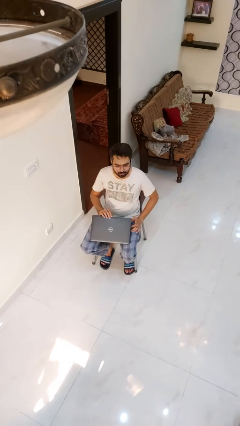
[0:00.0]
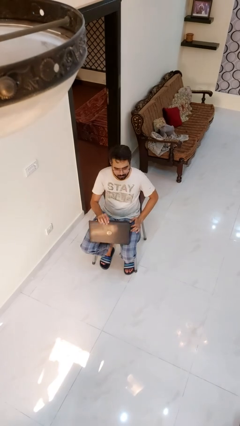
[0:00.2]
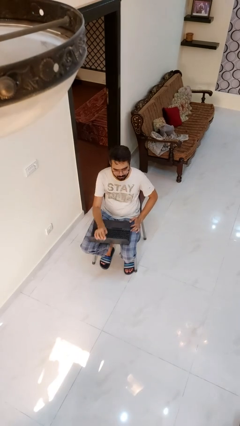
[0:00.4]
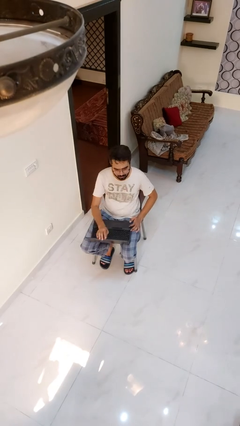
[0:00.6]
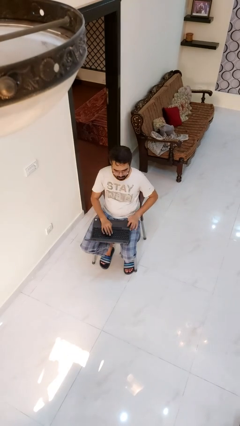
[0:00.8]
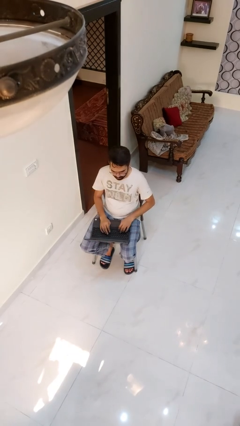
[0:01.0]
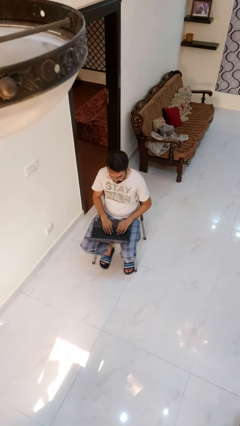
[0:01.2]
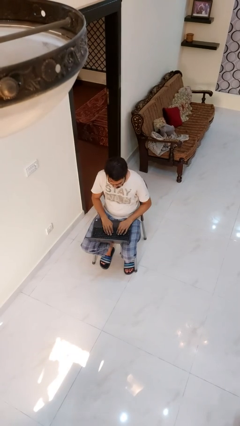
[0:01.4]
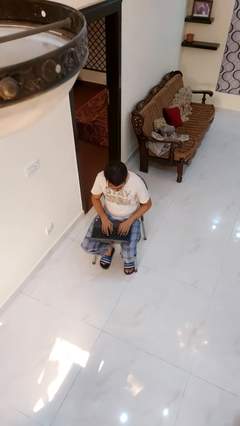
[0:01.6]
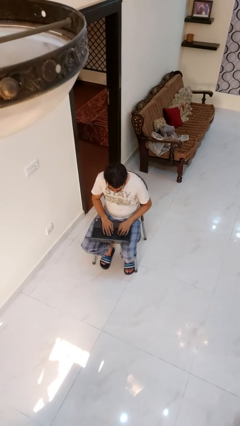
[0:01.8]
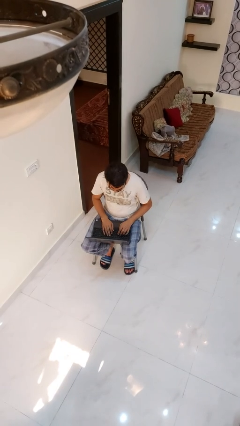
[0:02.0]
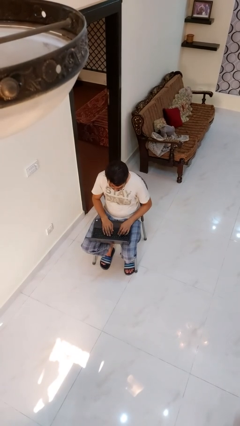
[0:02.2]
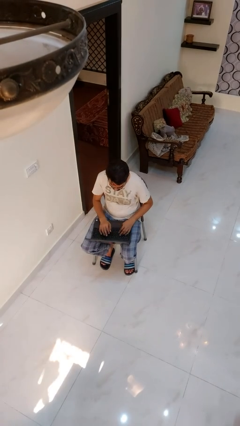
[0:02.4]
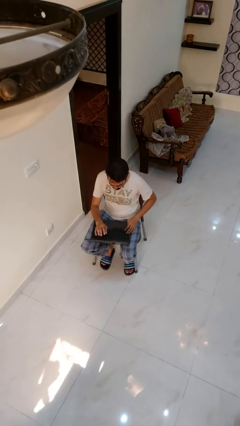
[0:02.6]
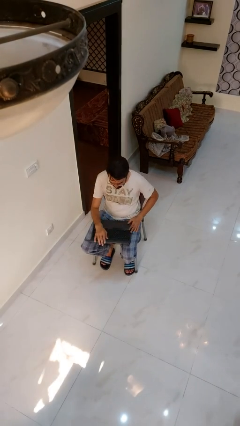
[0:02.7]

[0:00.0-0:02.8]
person opens laptop

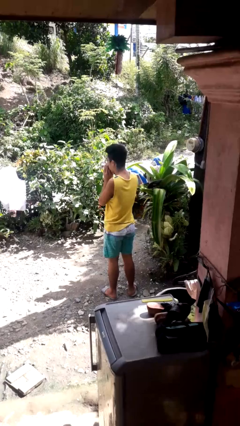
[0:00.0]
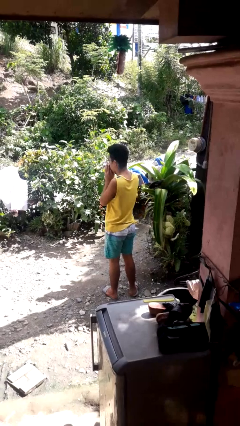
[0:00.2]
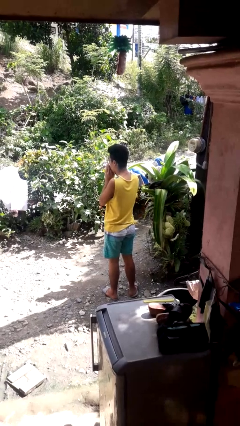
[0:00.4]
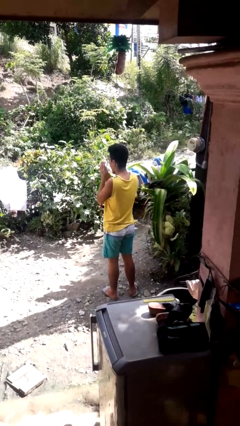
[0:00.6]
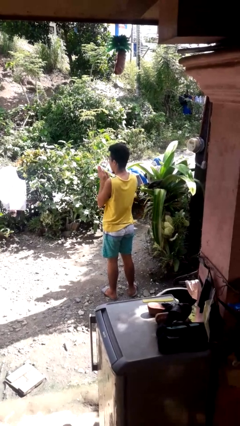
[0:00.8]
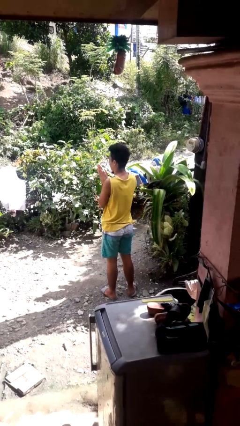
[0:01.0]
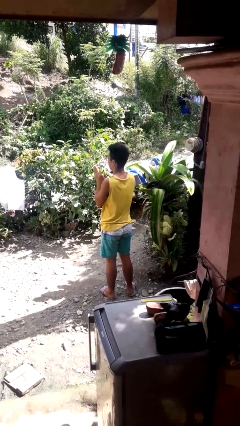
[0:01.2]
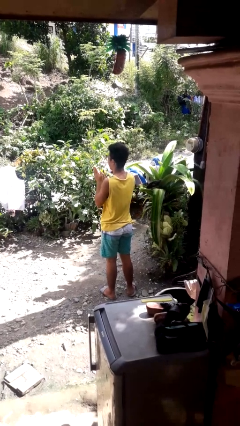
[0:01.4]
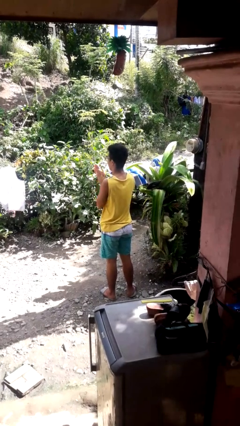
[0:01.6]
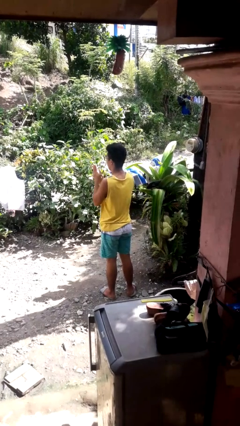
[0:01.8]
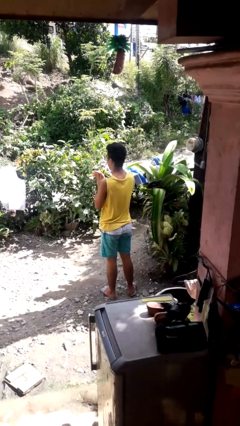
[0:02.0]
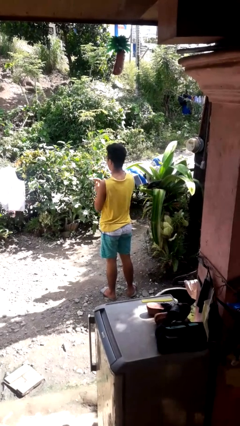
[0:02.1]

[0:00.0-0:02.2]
person blows into hands

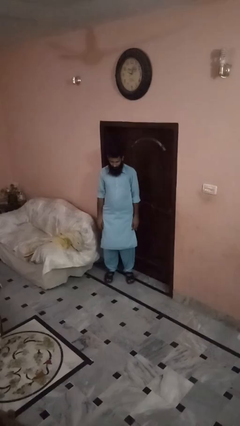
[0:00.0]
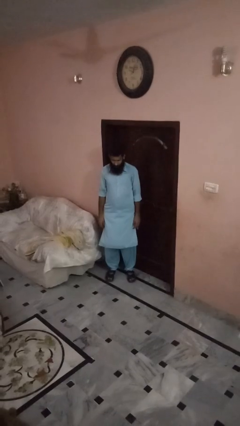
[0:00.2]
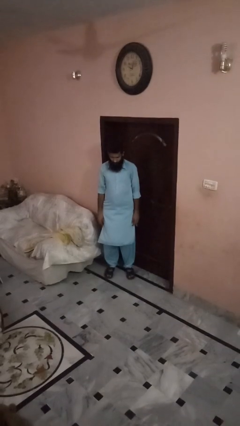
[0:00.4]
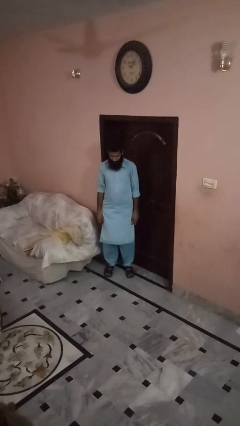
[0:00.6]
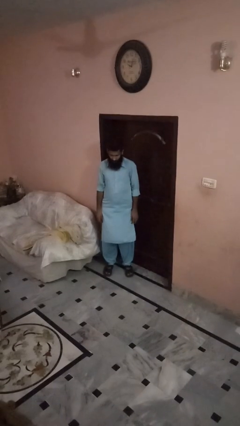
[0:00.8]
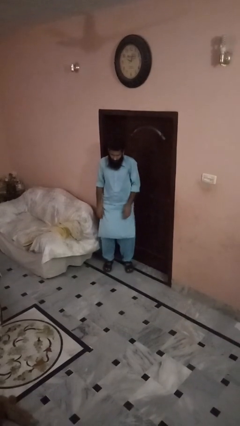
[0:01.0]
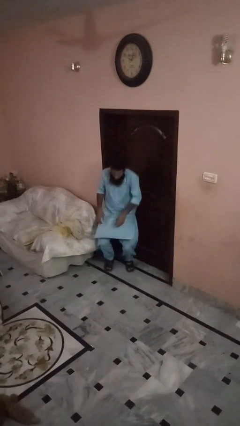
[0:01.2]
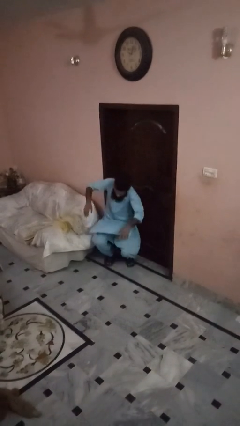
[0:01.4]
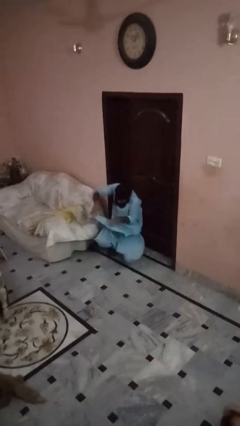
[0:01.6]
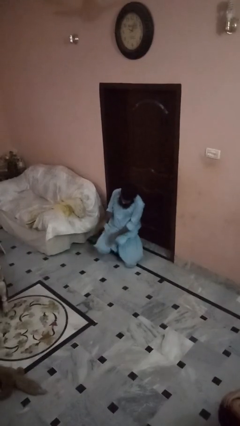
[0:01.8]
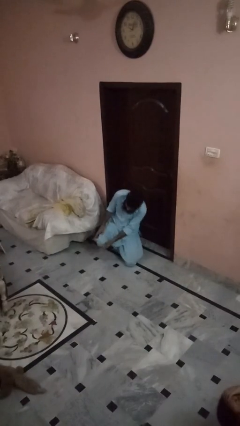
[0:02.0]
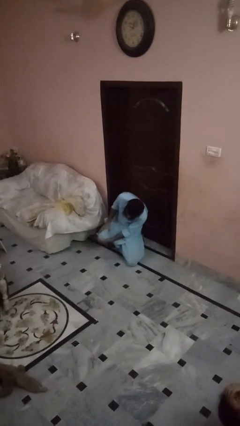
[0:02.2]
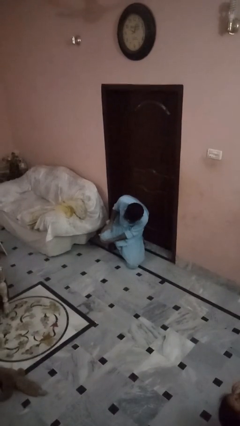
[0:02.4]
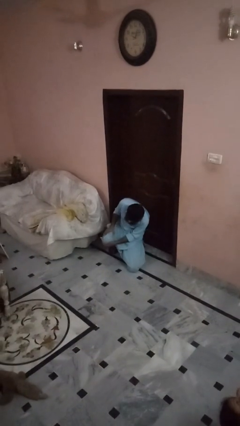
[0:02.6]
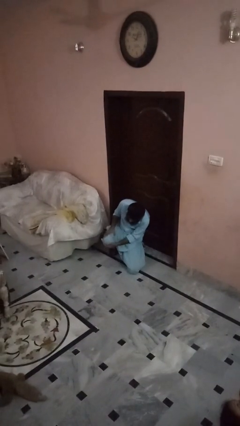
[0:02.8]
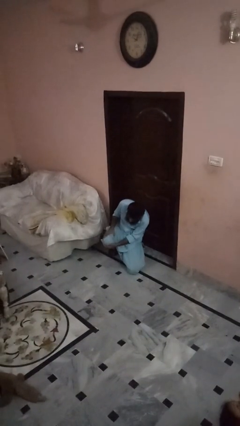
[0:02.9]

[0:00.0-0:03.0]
person falls while standing
